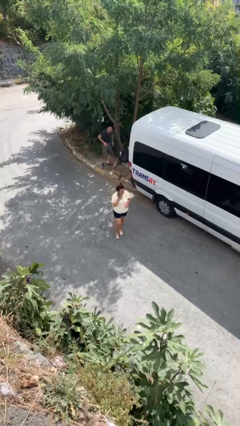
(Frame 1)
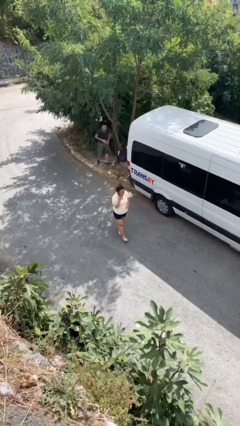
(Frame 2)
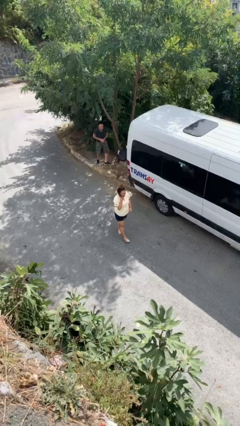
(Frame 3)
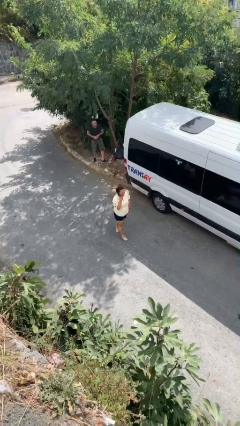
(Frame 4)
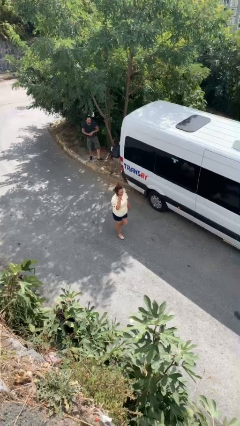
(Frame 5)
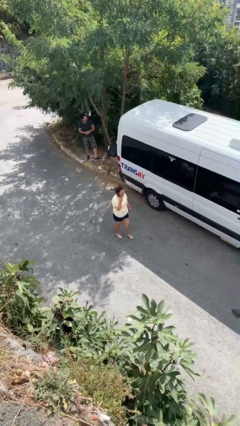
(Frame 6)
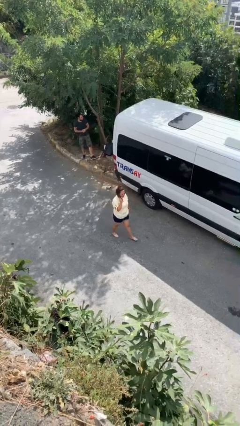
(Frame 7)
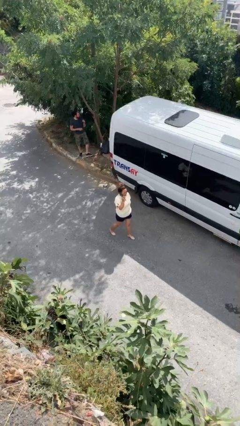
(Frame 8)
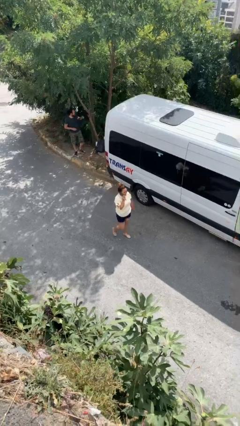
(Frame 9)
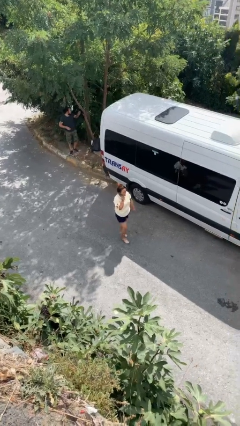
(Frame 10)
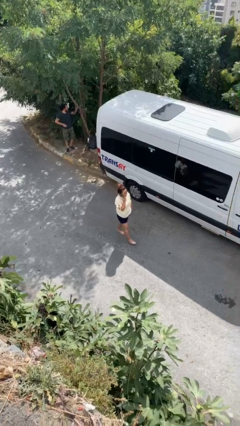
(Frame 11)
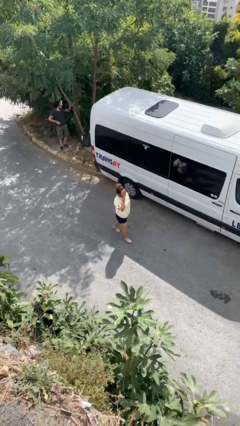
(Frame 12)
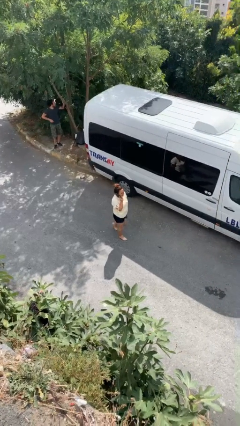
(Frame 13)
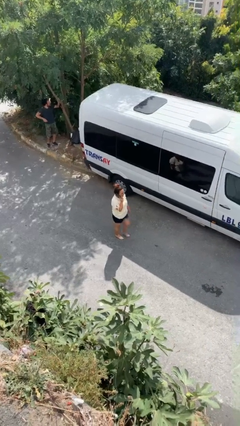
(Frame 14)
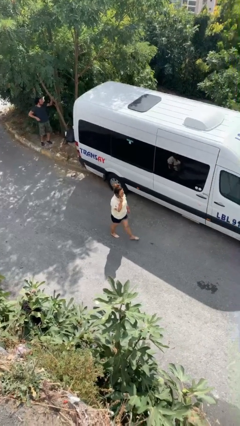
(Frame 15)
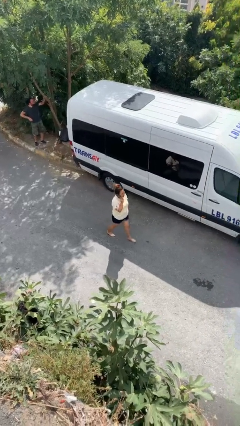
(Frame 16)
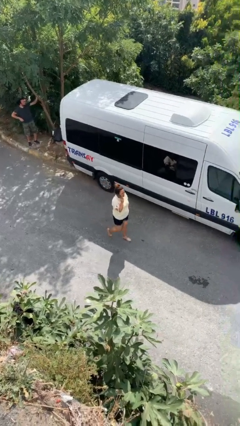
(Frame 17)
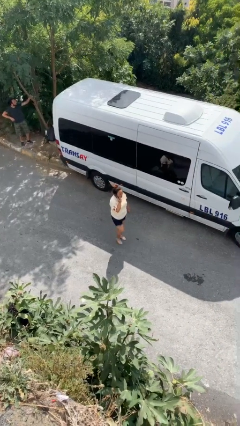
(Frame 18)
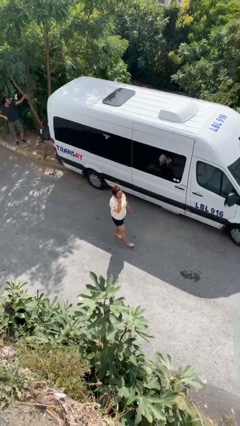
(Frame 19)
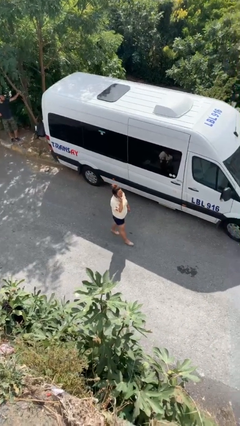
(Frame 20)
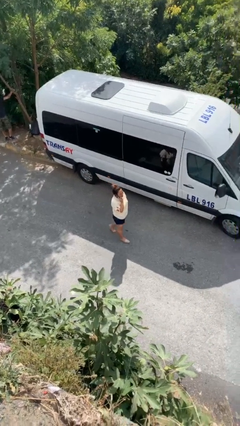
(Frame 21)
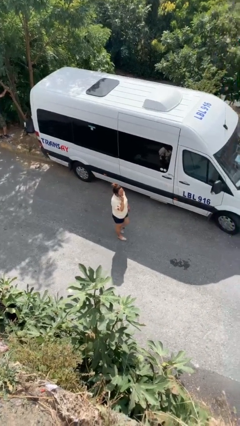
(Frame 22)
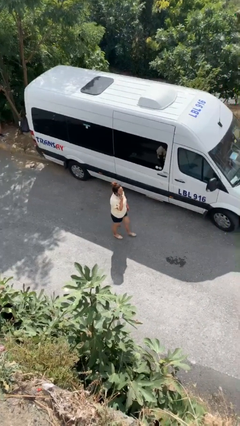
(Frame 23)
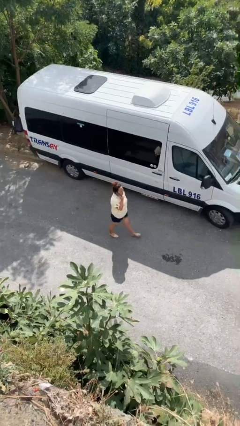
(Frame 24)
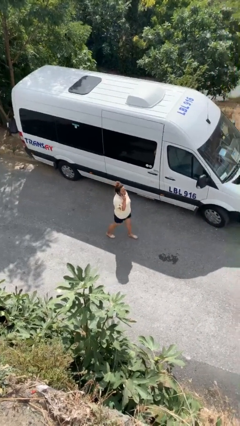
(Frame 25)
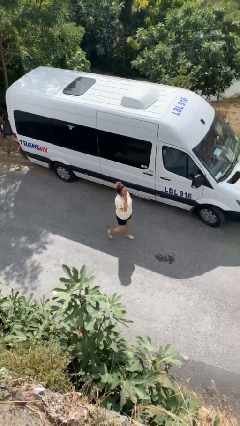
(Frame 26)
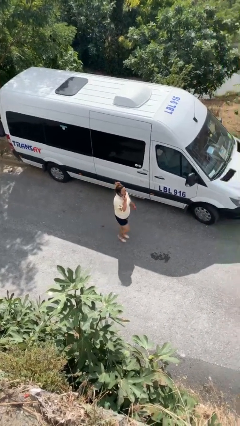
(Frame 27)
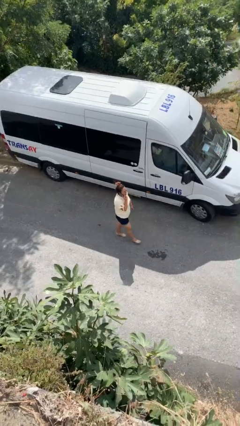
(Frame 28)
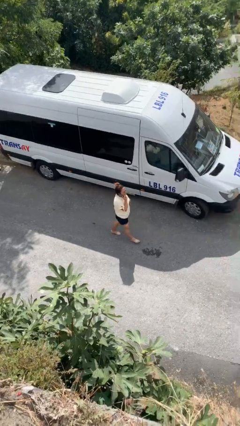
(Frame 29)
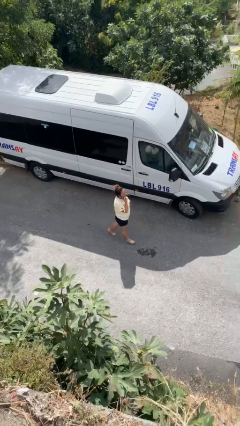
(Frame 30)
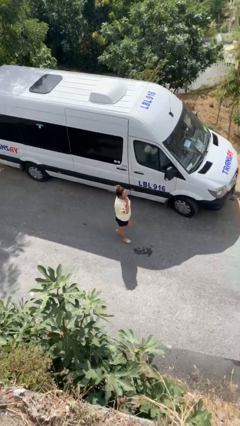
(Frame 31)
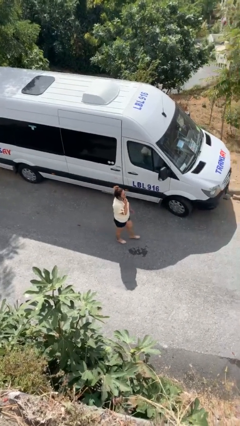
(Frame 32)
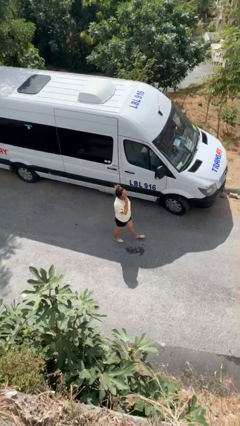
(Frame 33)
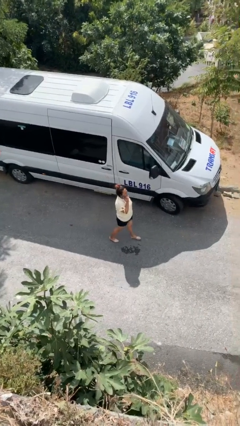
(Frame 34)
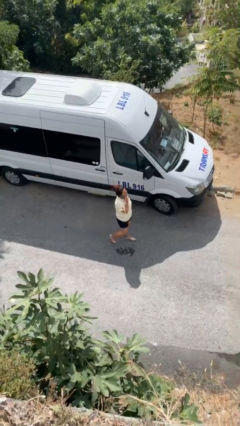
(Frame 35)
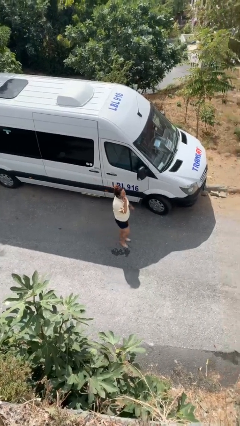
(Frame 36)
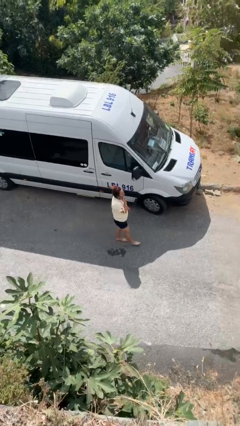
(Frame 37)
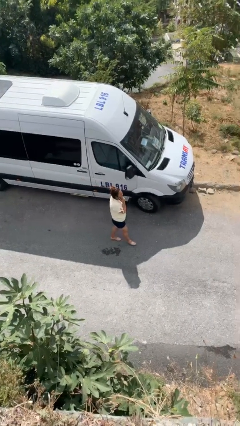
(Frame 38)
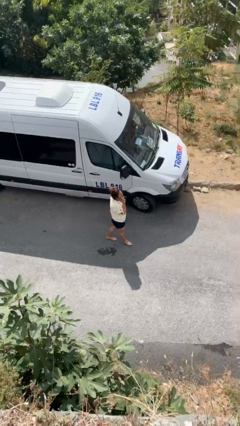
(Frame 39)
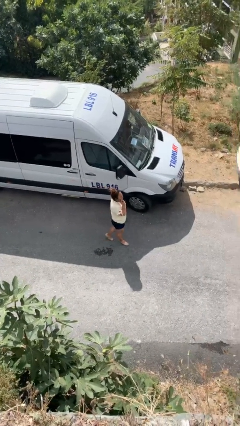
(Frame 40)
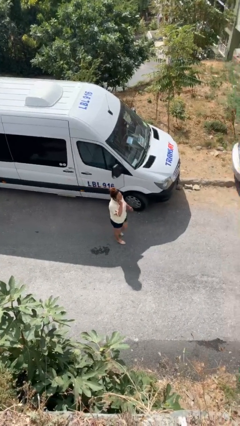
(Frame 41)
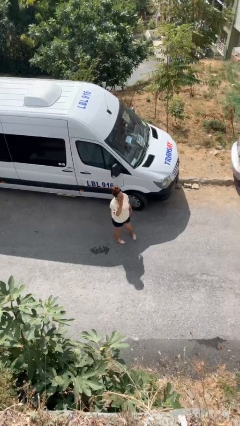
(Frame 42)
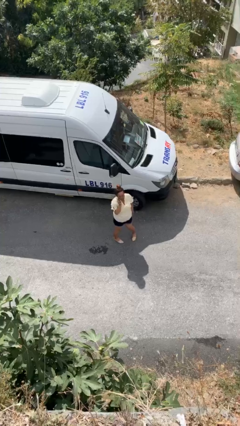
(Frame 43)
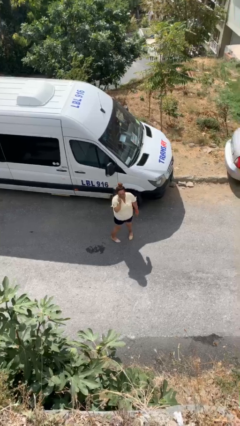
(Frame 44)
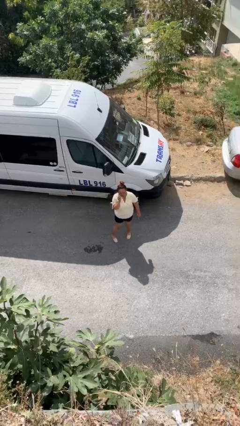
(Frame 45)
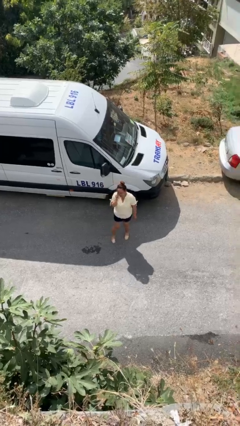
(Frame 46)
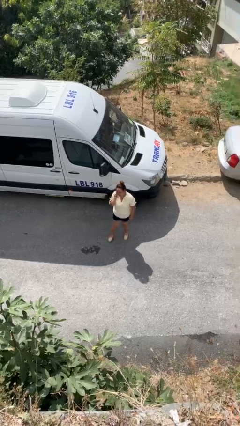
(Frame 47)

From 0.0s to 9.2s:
person talks on phone

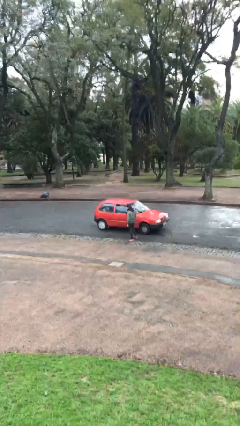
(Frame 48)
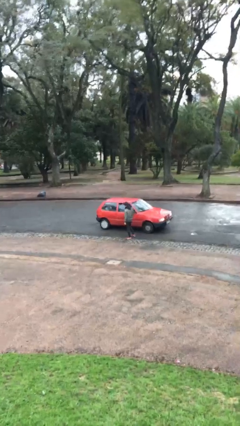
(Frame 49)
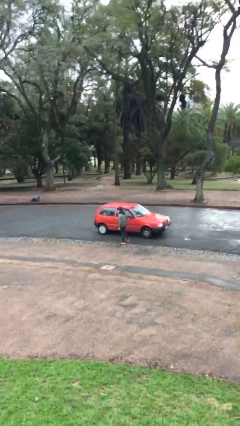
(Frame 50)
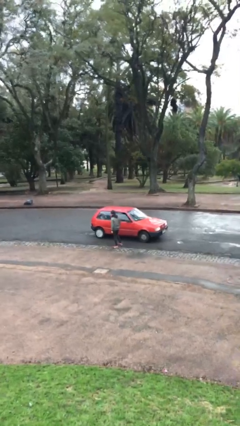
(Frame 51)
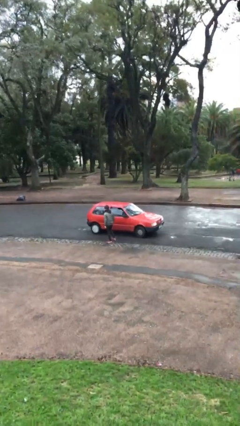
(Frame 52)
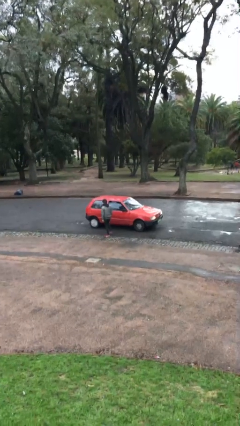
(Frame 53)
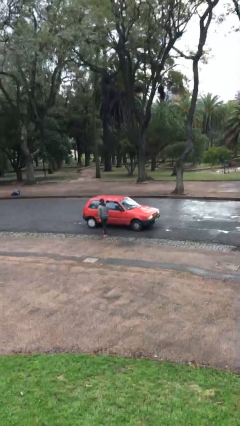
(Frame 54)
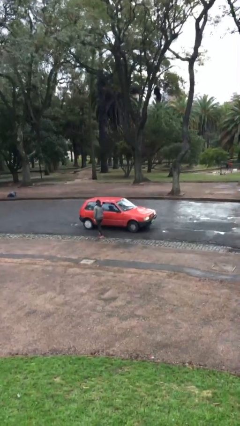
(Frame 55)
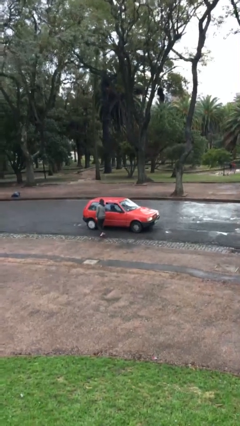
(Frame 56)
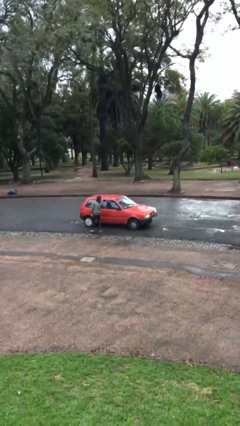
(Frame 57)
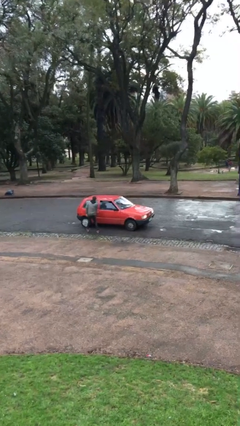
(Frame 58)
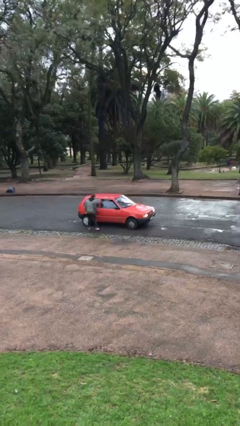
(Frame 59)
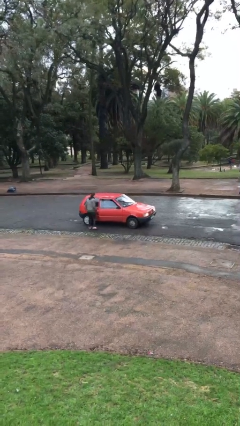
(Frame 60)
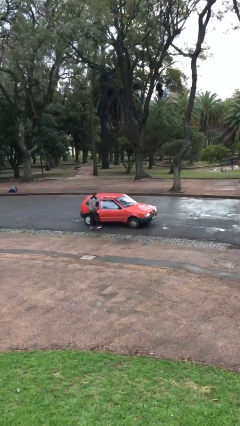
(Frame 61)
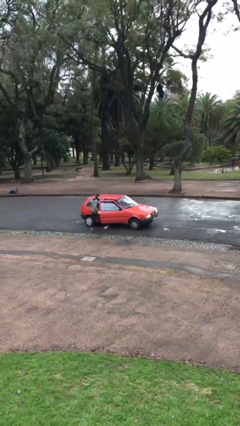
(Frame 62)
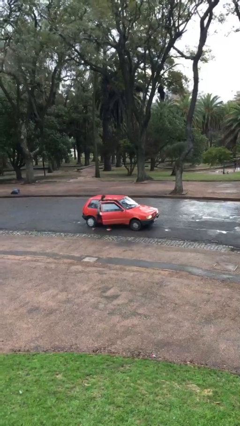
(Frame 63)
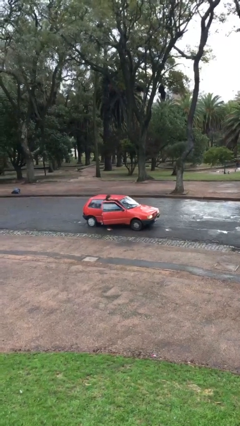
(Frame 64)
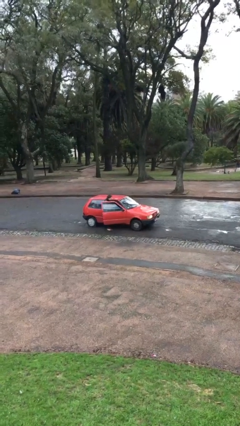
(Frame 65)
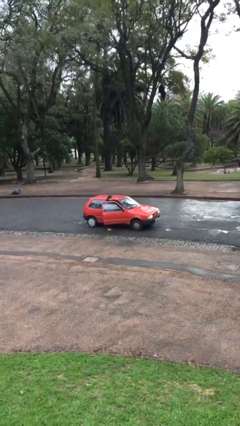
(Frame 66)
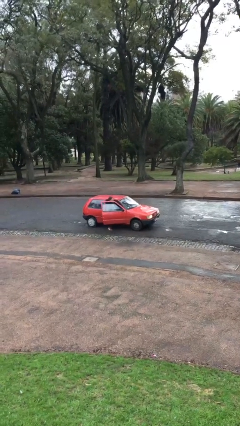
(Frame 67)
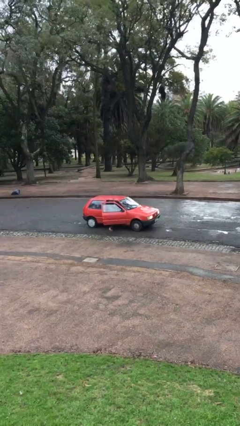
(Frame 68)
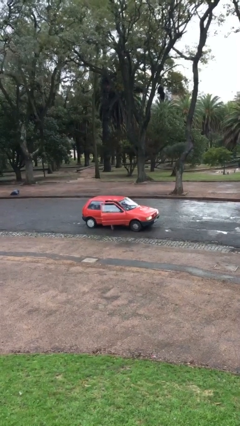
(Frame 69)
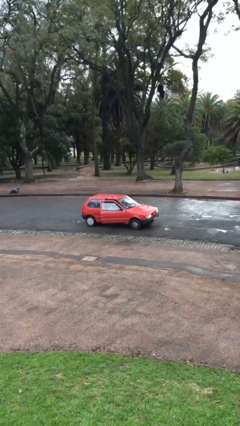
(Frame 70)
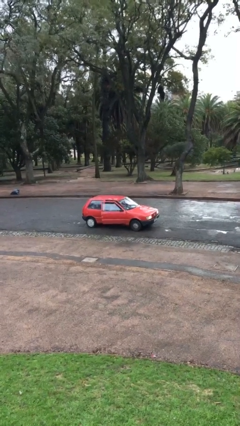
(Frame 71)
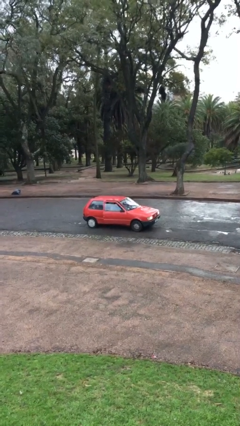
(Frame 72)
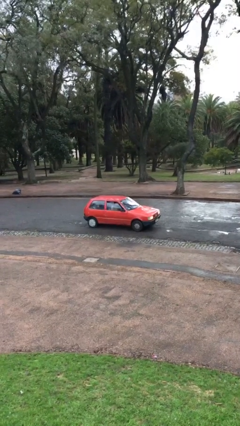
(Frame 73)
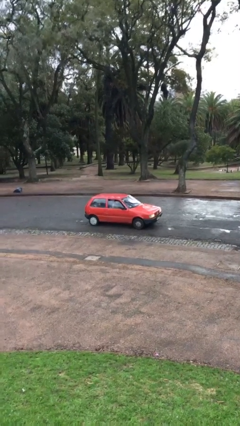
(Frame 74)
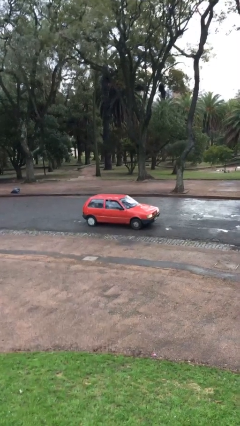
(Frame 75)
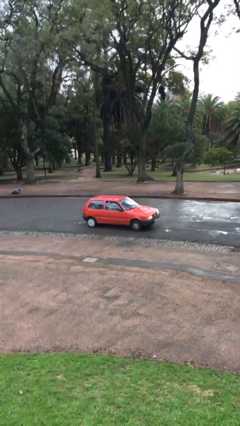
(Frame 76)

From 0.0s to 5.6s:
car picks up person

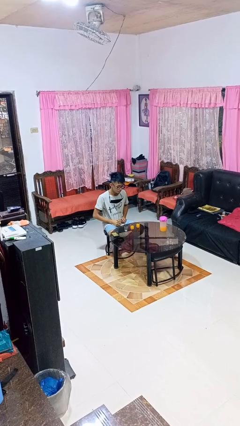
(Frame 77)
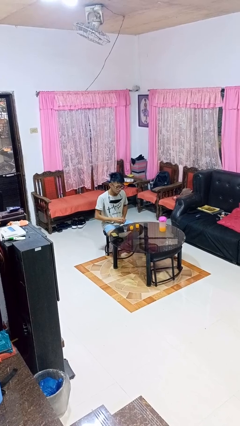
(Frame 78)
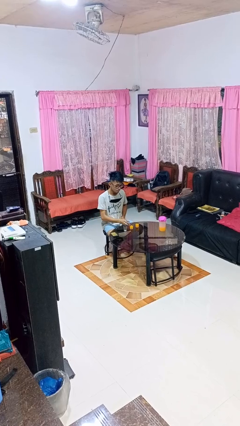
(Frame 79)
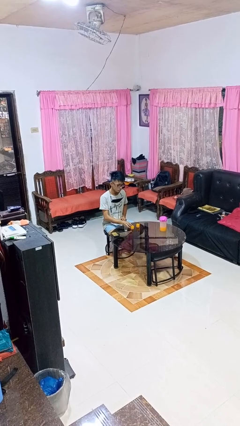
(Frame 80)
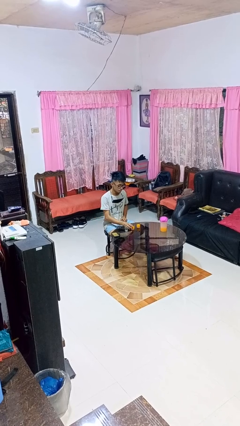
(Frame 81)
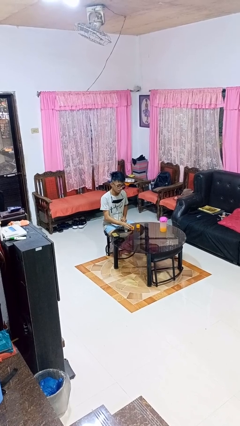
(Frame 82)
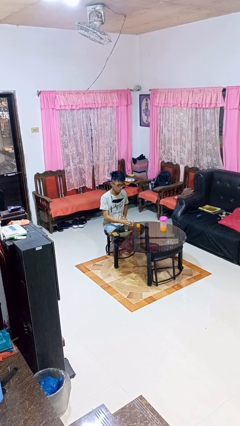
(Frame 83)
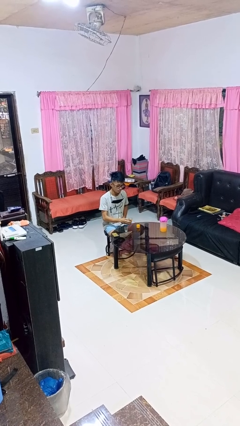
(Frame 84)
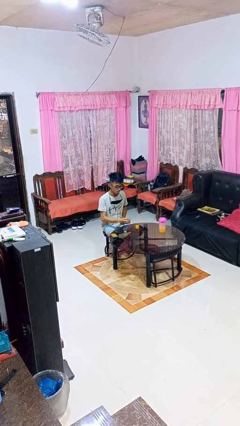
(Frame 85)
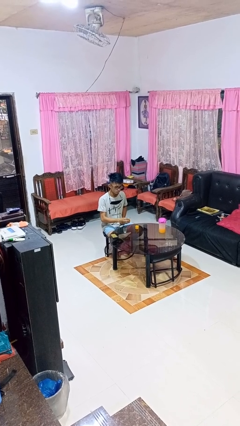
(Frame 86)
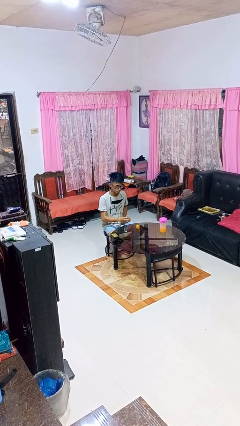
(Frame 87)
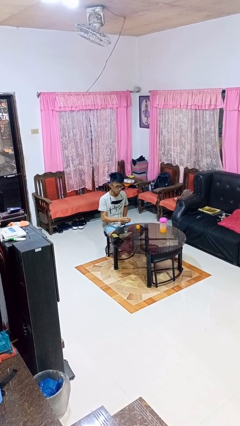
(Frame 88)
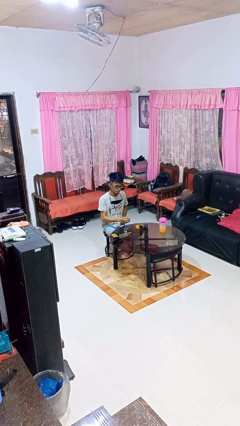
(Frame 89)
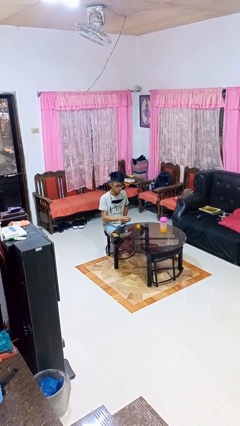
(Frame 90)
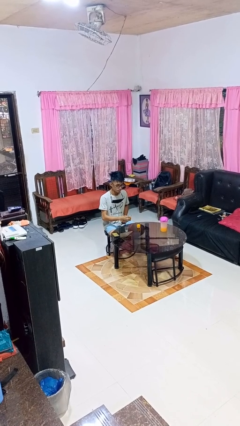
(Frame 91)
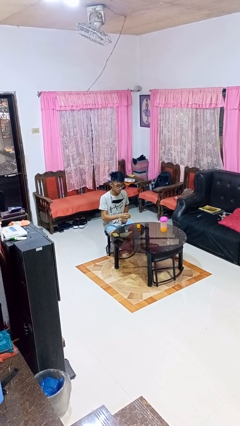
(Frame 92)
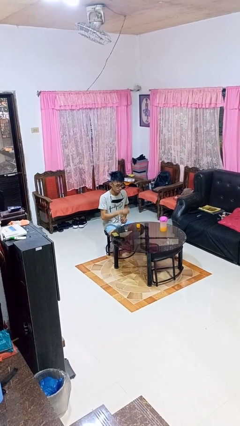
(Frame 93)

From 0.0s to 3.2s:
person picks up object from table

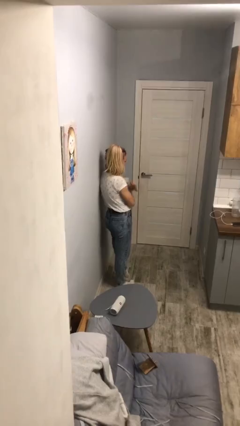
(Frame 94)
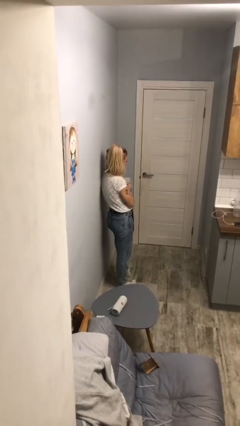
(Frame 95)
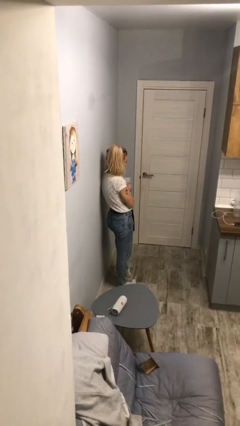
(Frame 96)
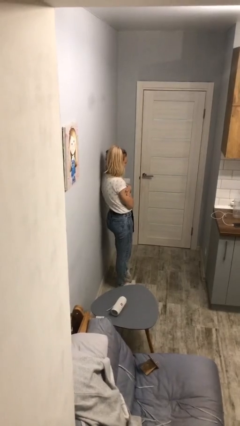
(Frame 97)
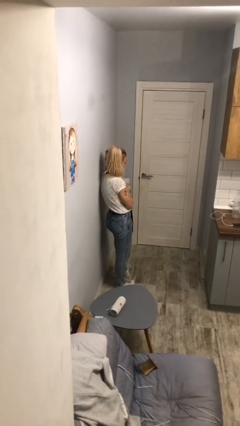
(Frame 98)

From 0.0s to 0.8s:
person crosses arms
